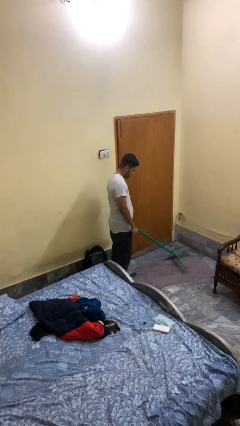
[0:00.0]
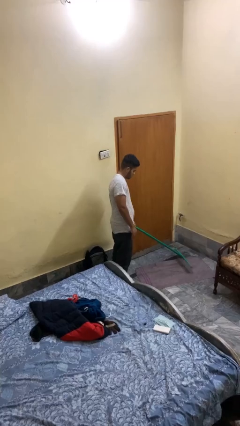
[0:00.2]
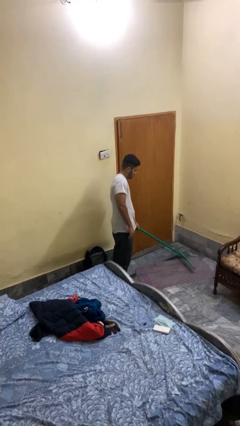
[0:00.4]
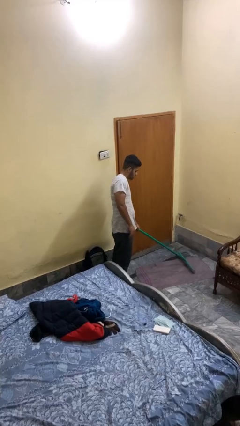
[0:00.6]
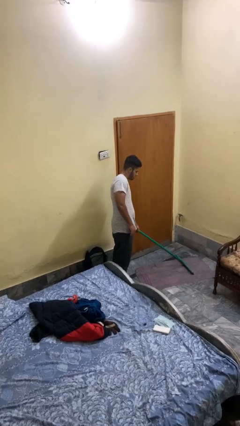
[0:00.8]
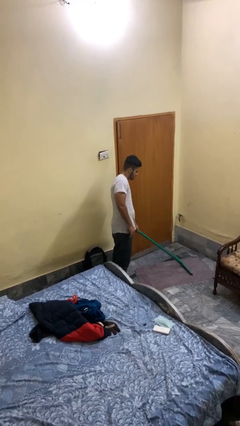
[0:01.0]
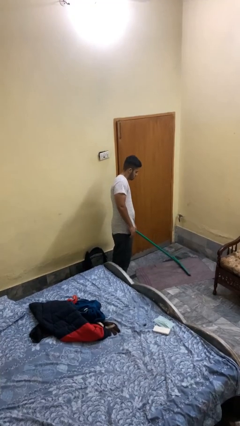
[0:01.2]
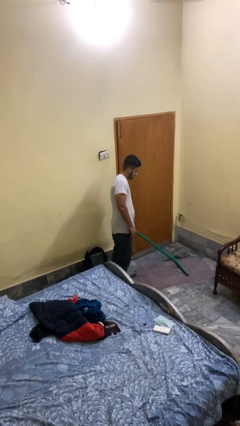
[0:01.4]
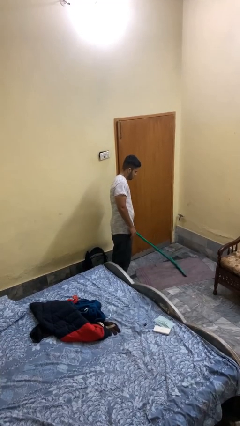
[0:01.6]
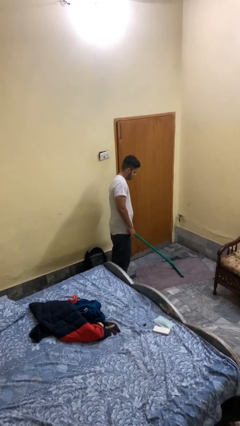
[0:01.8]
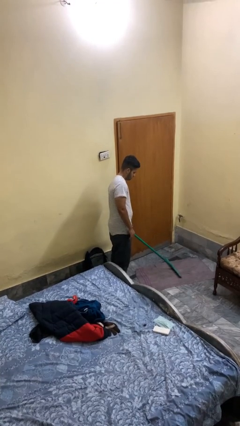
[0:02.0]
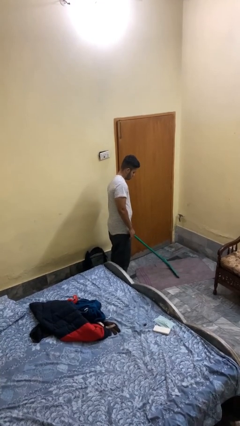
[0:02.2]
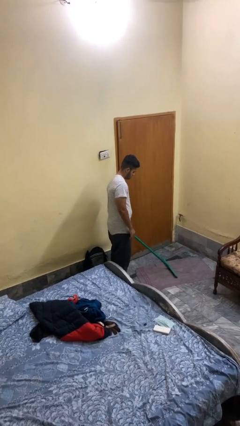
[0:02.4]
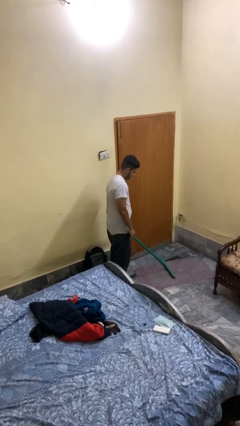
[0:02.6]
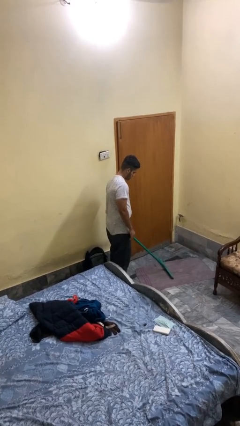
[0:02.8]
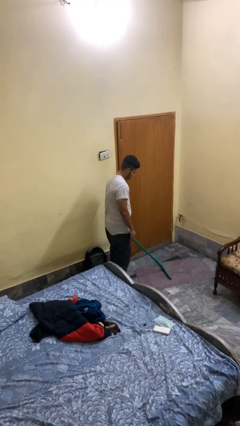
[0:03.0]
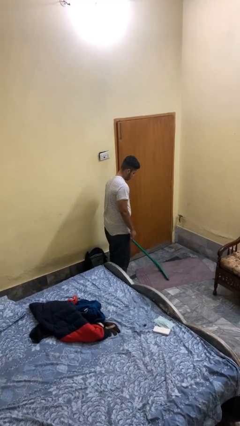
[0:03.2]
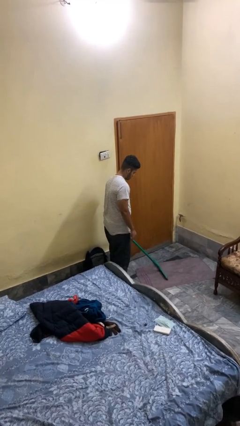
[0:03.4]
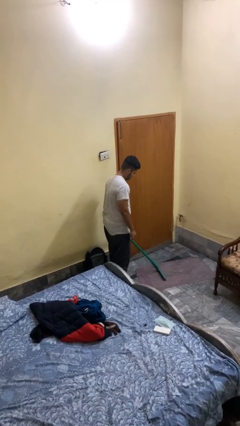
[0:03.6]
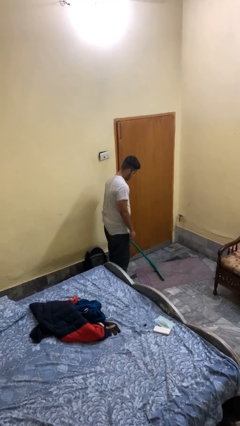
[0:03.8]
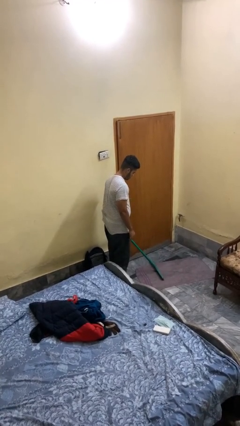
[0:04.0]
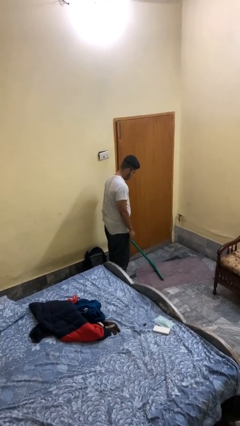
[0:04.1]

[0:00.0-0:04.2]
person vacuums carpet

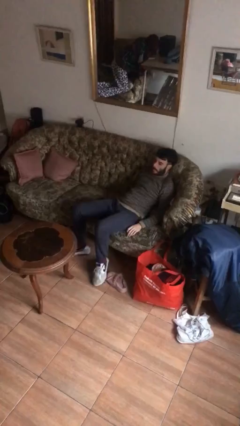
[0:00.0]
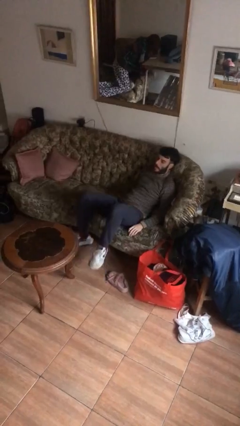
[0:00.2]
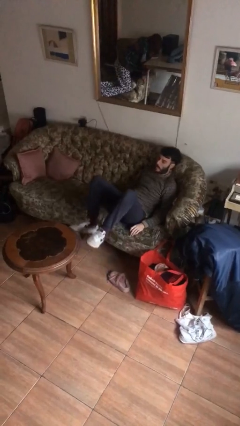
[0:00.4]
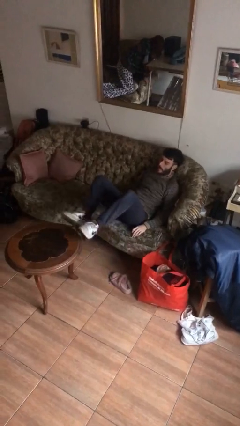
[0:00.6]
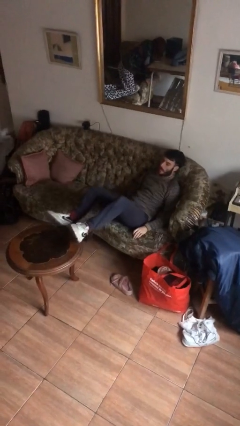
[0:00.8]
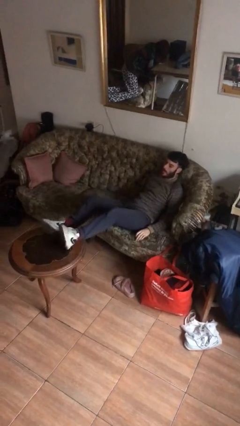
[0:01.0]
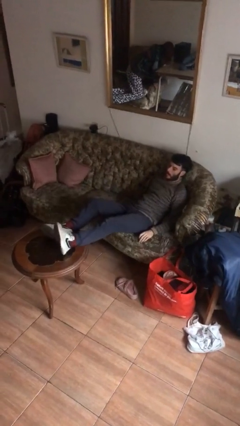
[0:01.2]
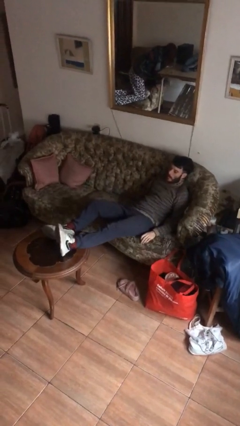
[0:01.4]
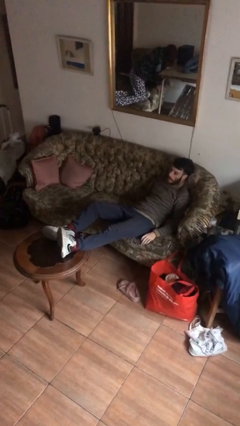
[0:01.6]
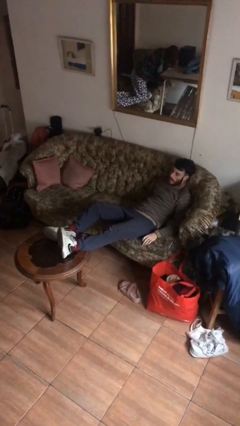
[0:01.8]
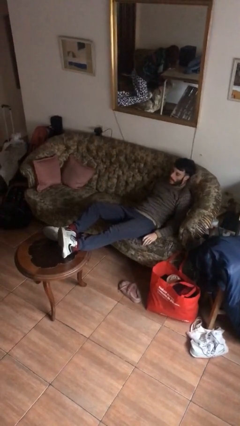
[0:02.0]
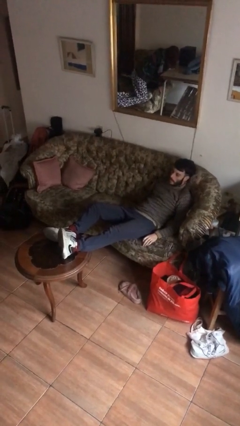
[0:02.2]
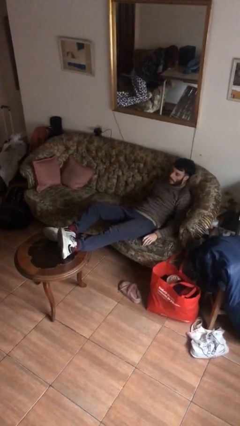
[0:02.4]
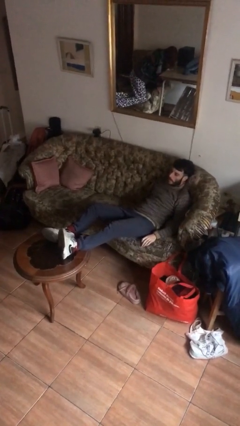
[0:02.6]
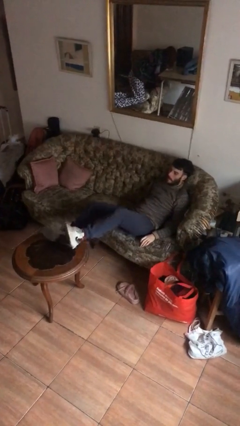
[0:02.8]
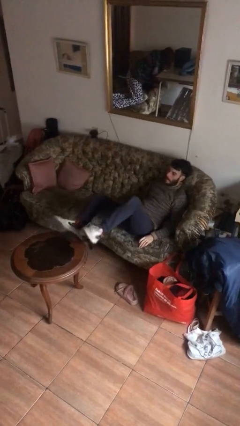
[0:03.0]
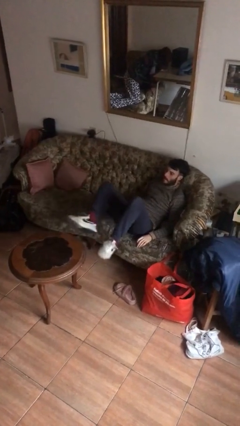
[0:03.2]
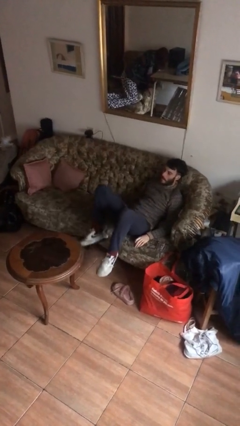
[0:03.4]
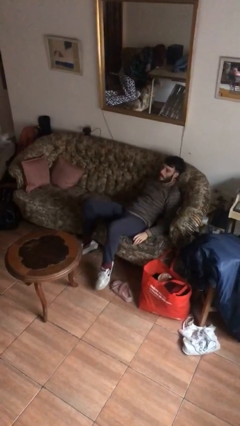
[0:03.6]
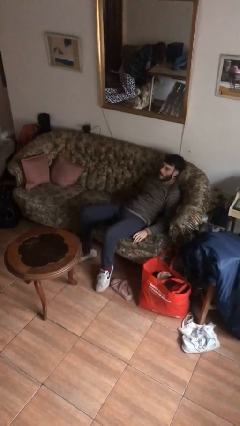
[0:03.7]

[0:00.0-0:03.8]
person puts feet up

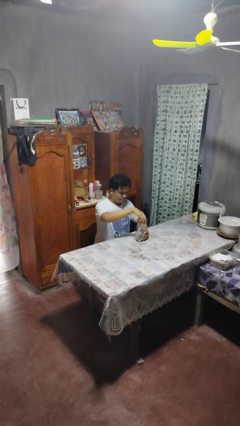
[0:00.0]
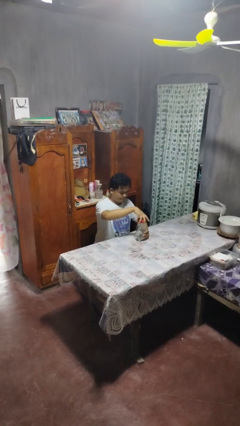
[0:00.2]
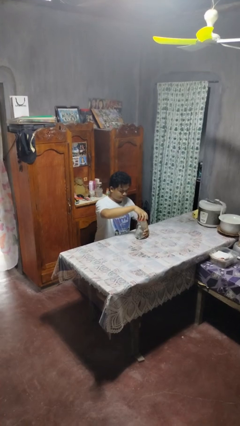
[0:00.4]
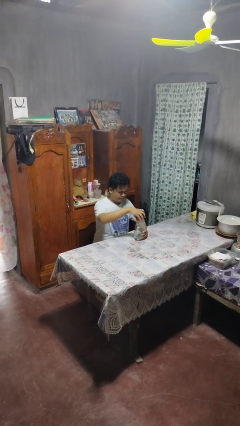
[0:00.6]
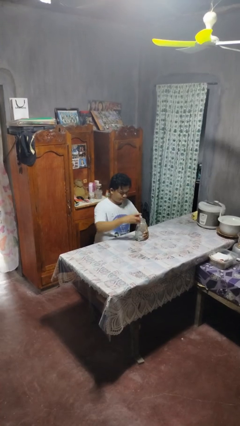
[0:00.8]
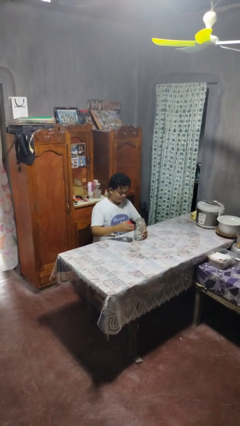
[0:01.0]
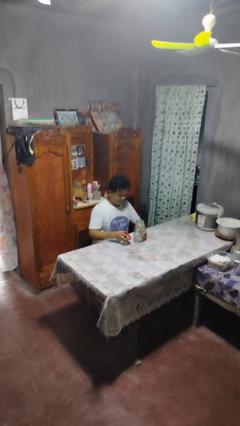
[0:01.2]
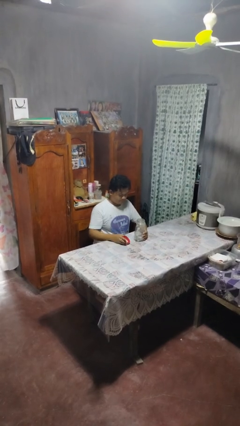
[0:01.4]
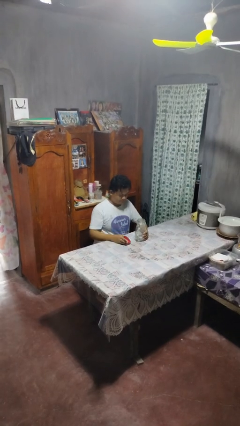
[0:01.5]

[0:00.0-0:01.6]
person opens jar

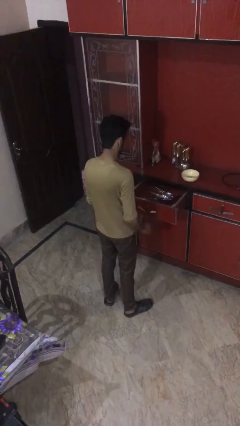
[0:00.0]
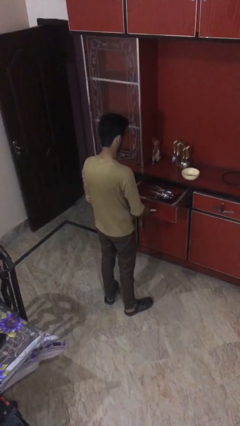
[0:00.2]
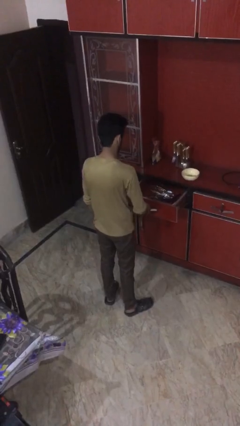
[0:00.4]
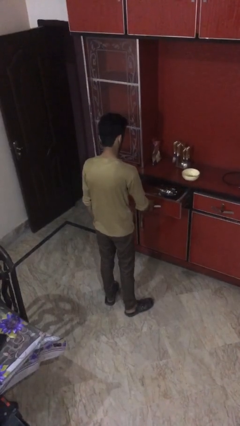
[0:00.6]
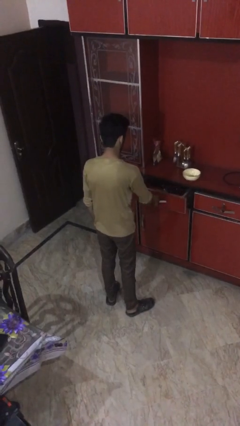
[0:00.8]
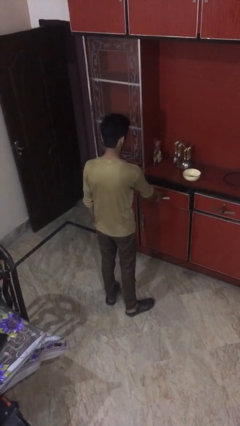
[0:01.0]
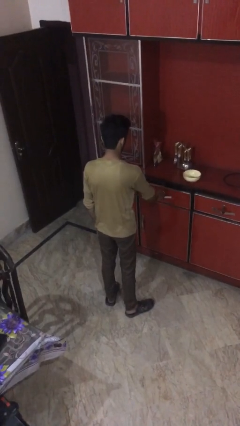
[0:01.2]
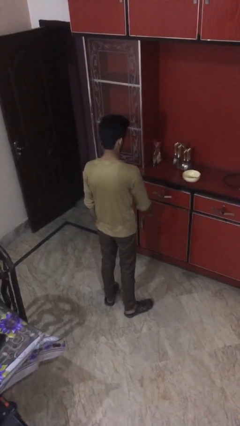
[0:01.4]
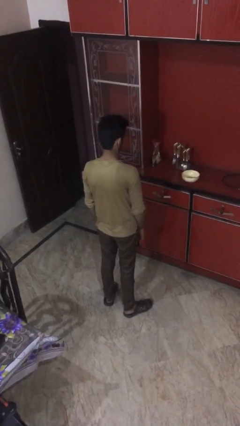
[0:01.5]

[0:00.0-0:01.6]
person closes kitchen drawer

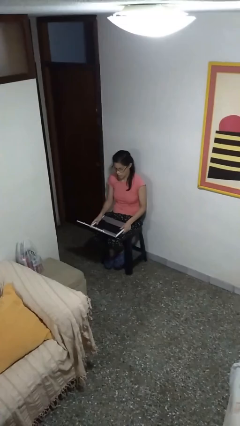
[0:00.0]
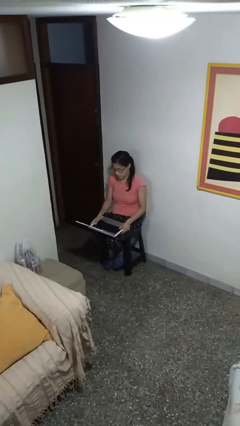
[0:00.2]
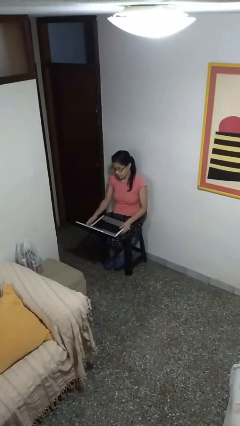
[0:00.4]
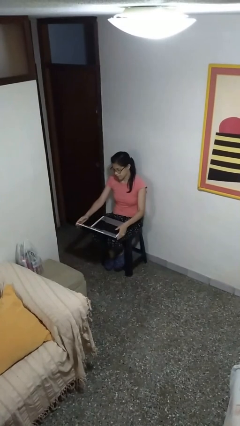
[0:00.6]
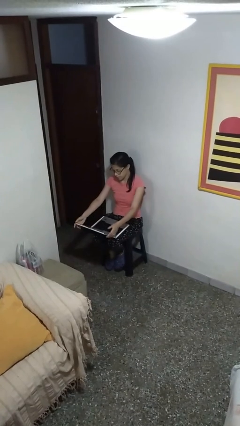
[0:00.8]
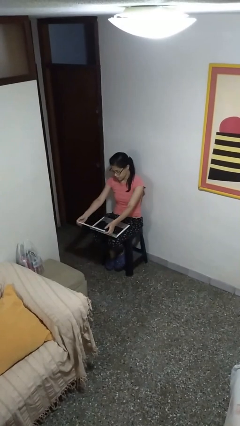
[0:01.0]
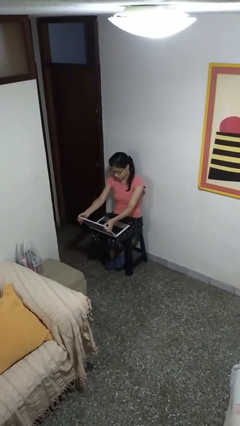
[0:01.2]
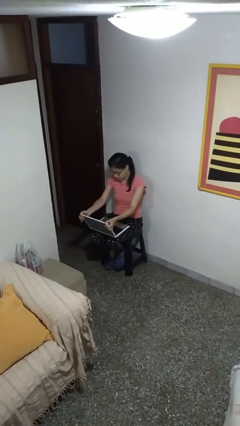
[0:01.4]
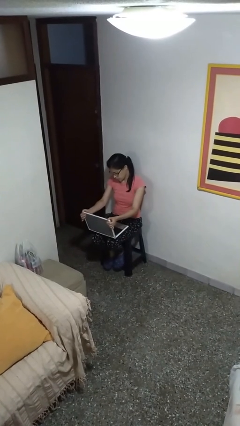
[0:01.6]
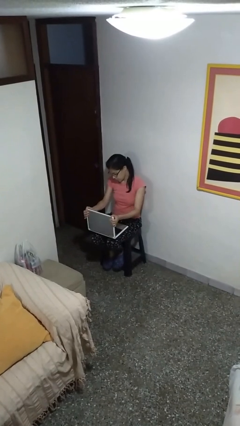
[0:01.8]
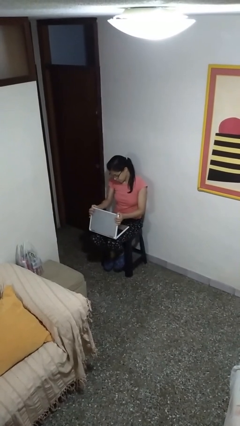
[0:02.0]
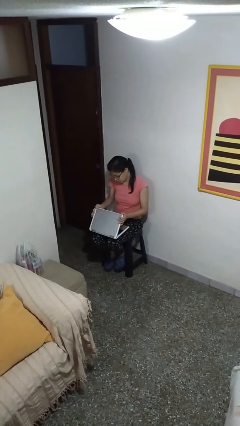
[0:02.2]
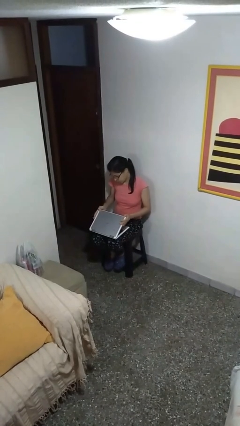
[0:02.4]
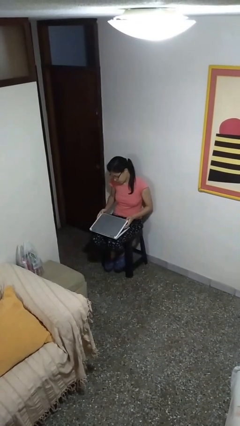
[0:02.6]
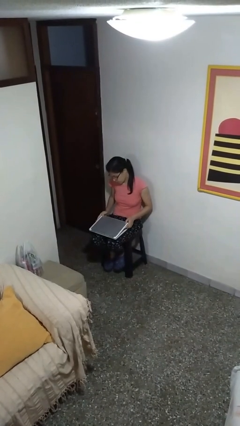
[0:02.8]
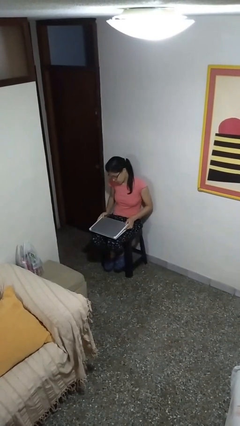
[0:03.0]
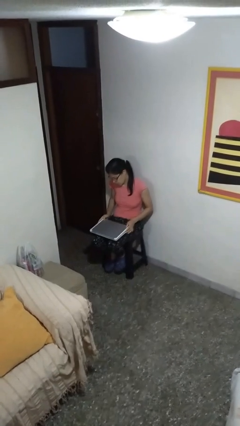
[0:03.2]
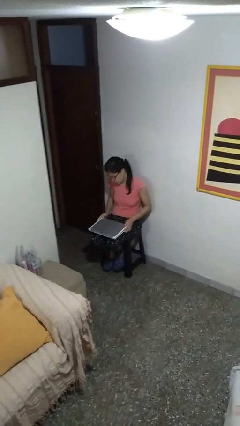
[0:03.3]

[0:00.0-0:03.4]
person closes laptop

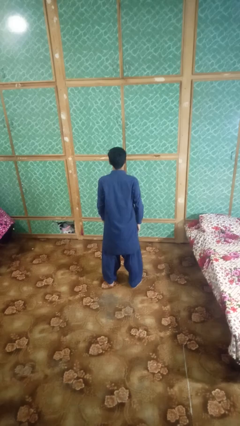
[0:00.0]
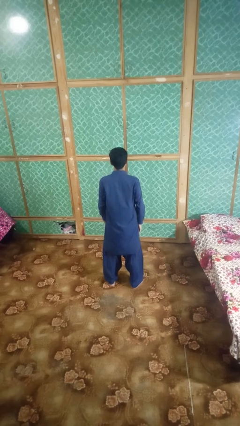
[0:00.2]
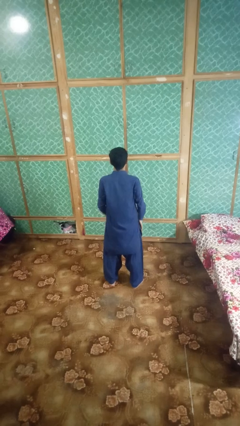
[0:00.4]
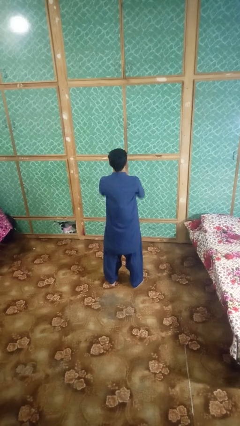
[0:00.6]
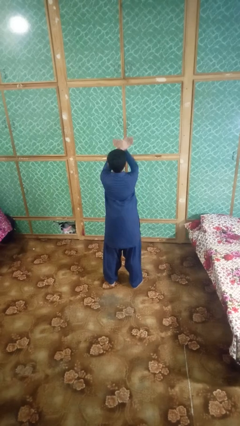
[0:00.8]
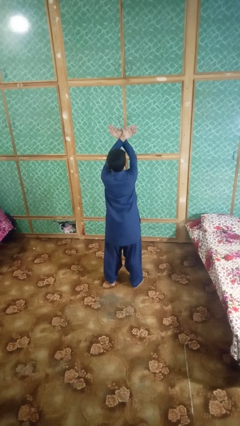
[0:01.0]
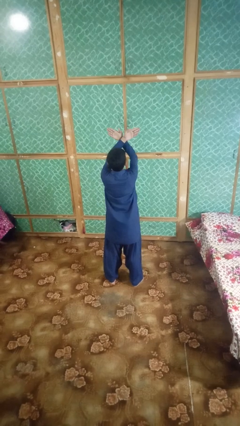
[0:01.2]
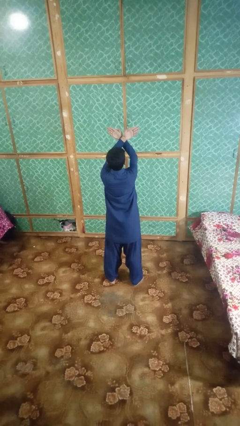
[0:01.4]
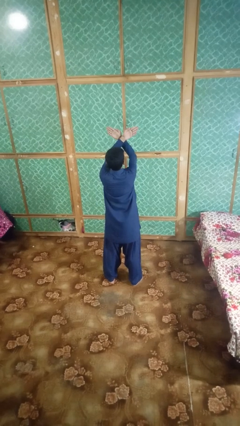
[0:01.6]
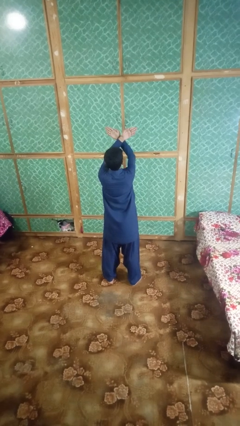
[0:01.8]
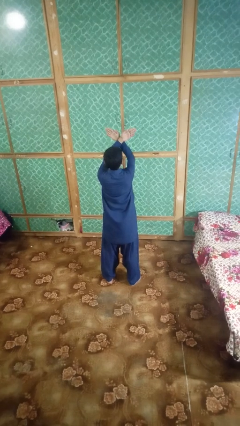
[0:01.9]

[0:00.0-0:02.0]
person gestures arms x

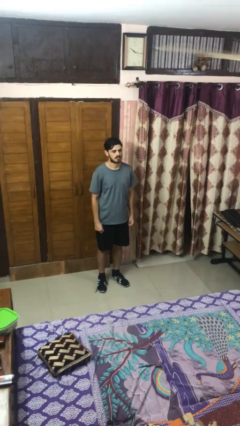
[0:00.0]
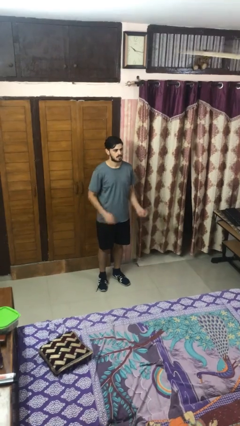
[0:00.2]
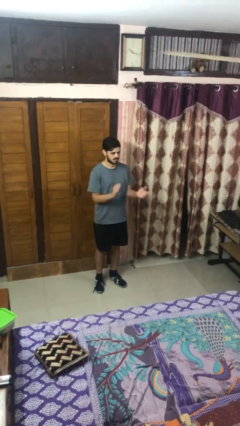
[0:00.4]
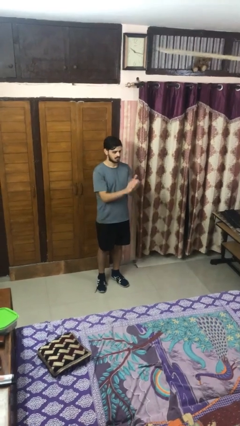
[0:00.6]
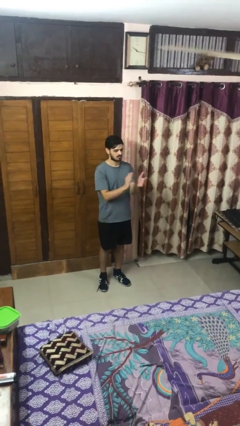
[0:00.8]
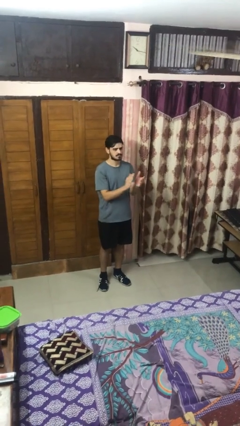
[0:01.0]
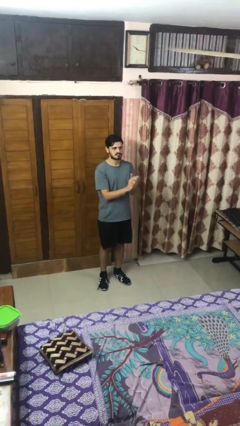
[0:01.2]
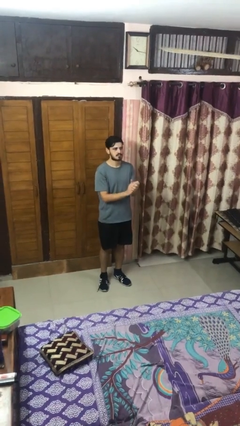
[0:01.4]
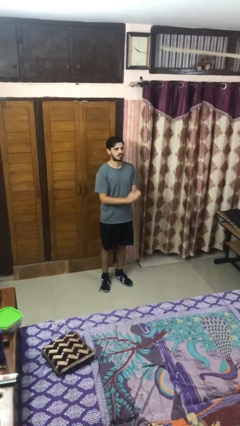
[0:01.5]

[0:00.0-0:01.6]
person claps hands
